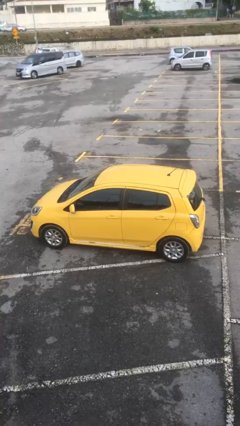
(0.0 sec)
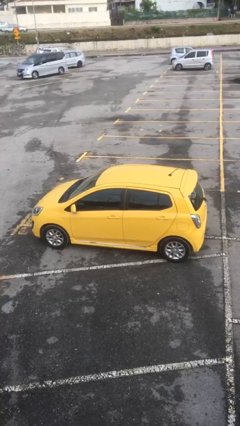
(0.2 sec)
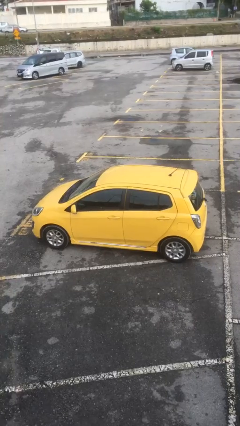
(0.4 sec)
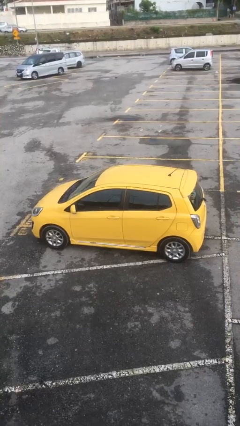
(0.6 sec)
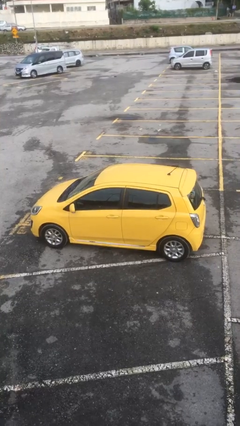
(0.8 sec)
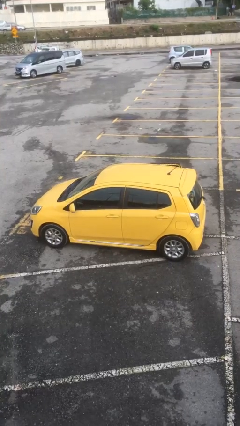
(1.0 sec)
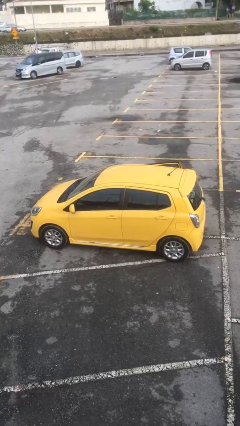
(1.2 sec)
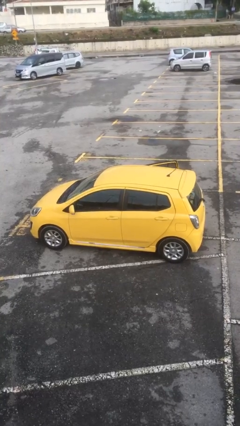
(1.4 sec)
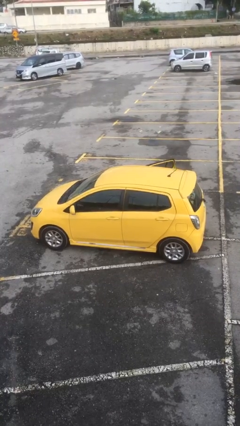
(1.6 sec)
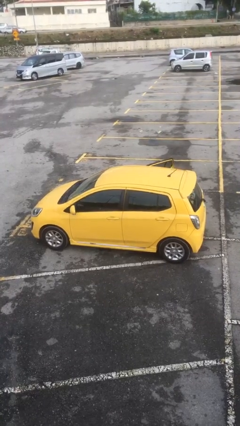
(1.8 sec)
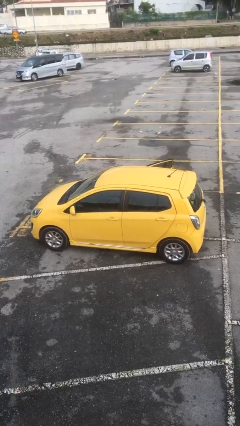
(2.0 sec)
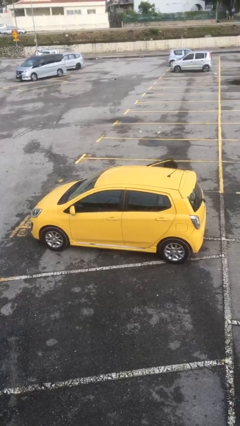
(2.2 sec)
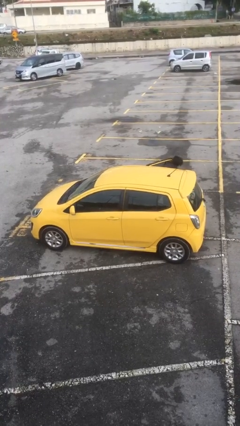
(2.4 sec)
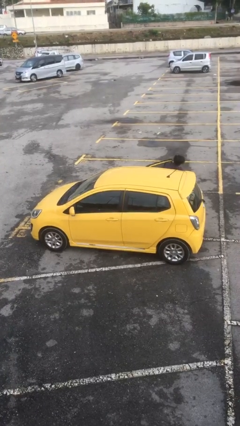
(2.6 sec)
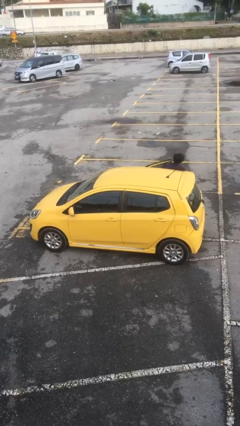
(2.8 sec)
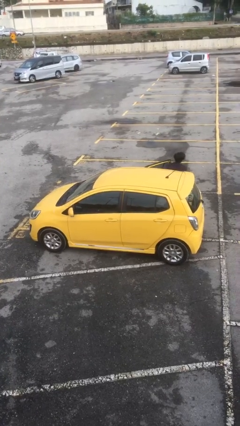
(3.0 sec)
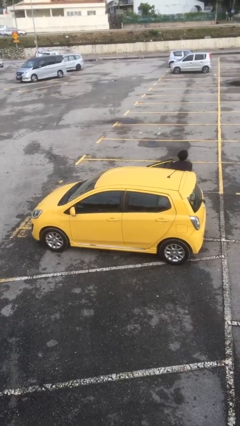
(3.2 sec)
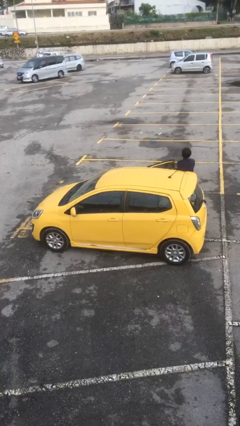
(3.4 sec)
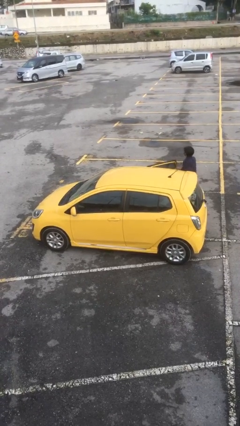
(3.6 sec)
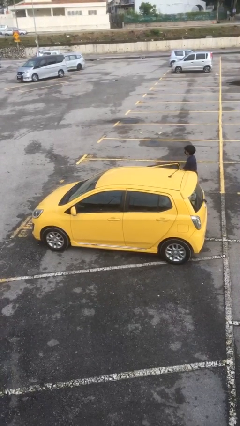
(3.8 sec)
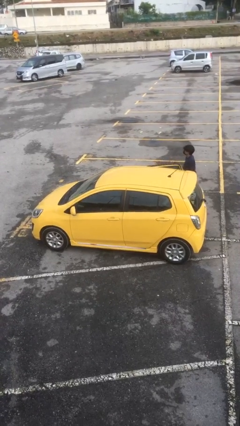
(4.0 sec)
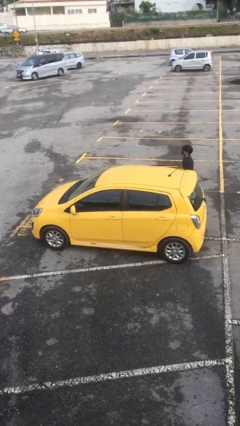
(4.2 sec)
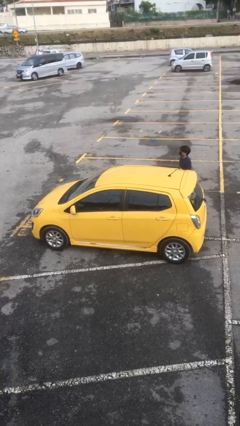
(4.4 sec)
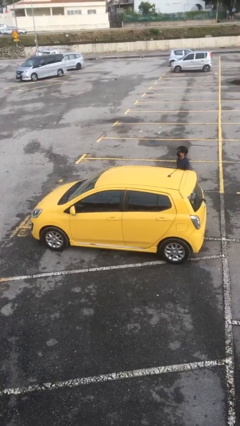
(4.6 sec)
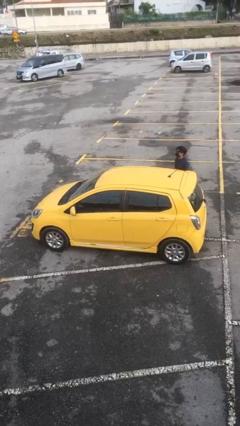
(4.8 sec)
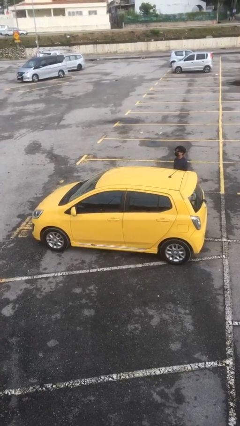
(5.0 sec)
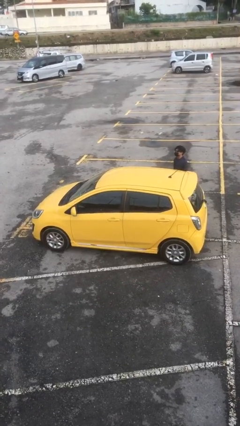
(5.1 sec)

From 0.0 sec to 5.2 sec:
car drops off person

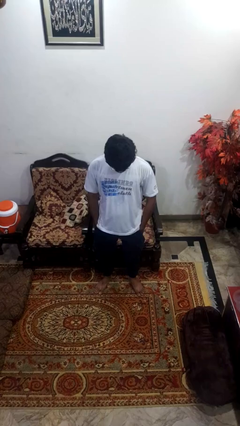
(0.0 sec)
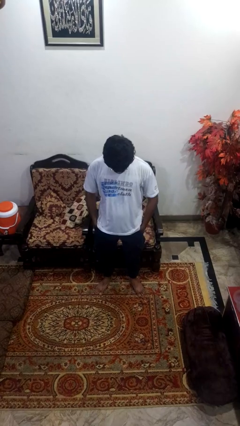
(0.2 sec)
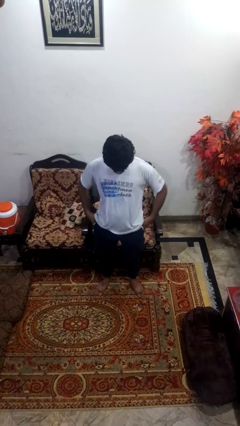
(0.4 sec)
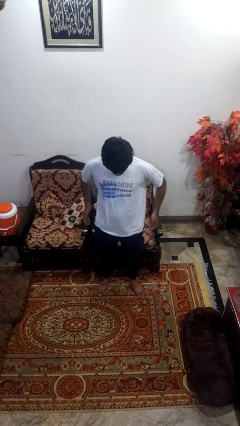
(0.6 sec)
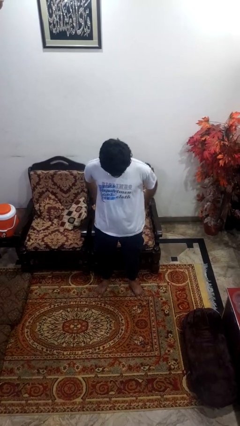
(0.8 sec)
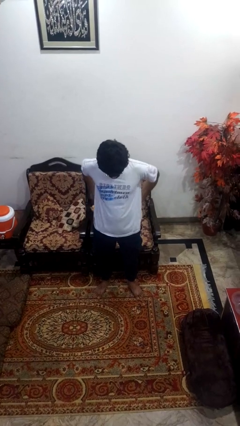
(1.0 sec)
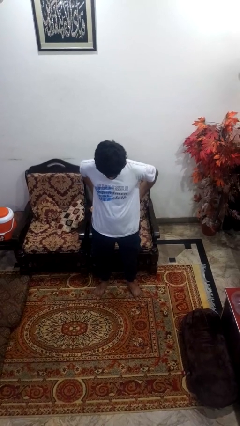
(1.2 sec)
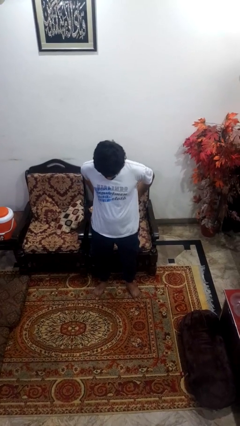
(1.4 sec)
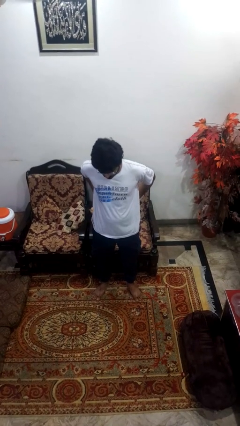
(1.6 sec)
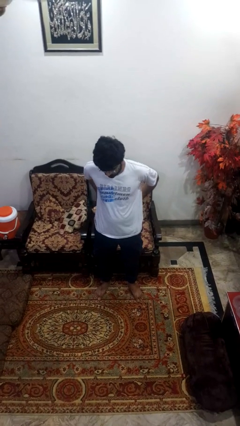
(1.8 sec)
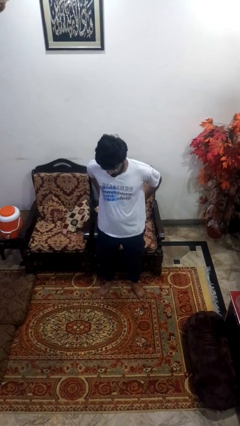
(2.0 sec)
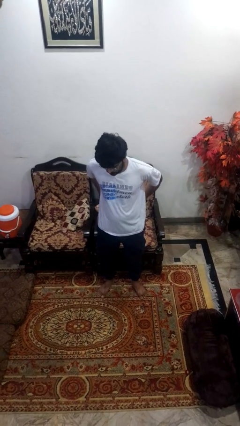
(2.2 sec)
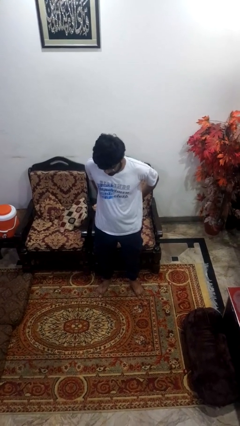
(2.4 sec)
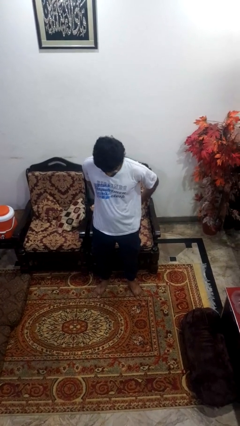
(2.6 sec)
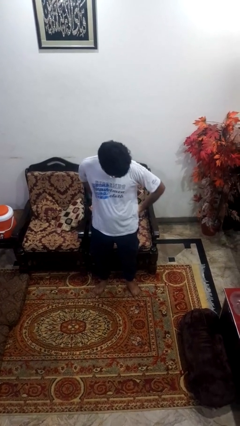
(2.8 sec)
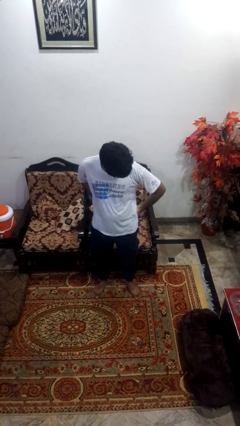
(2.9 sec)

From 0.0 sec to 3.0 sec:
person puts hands in back pockets

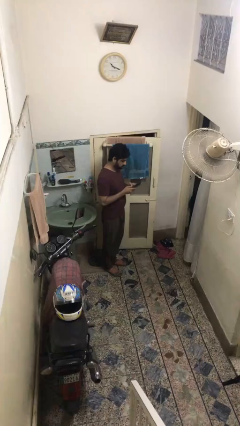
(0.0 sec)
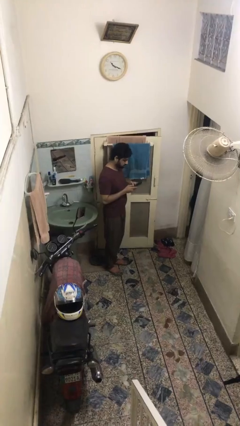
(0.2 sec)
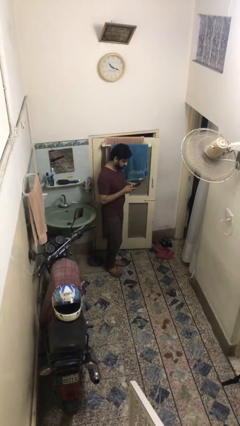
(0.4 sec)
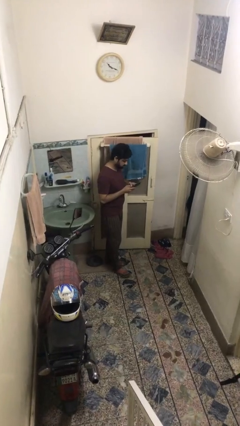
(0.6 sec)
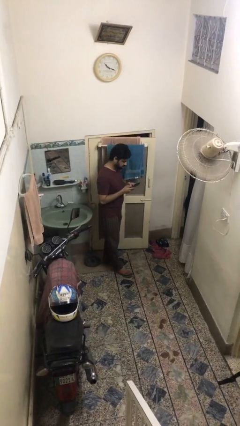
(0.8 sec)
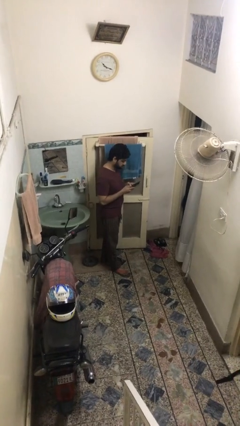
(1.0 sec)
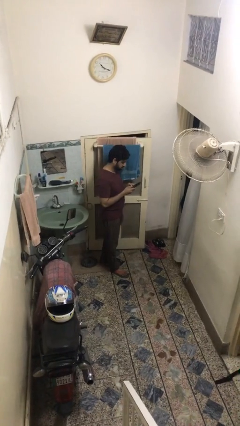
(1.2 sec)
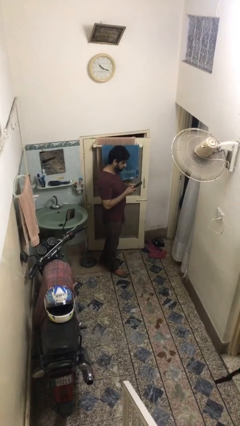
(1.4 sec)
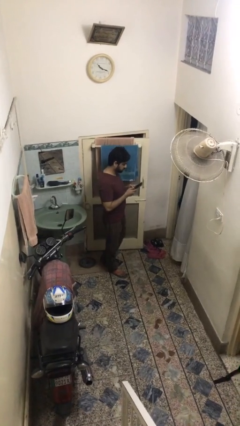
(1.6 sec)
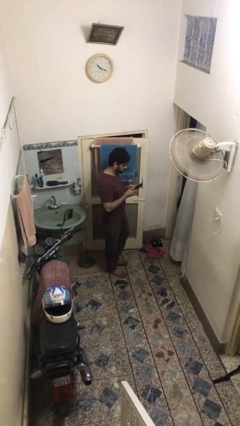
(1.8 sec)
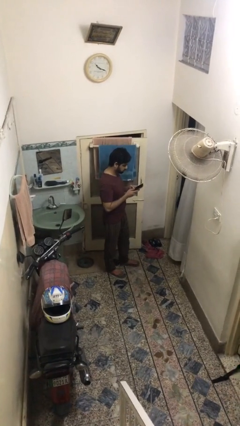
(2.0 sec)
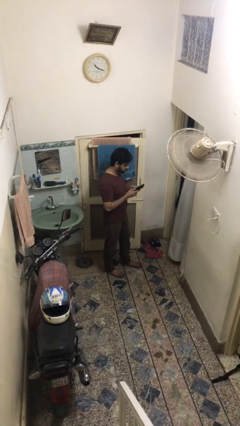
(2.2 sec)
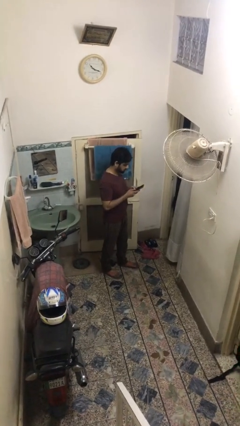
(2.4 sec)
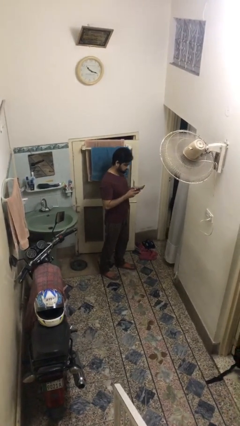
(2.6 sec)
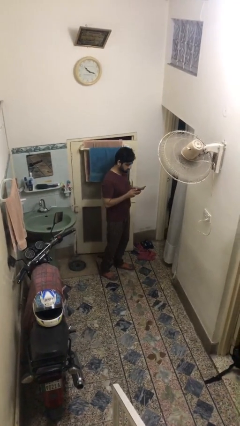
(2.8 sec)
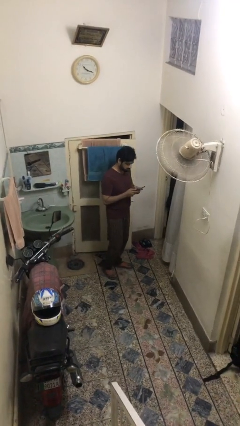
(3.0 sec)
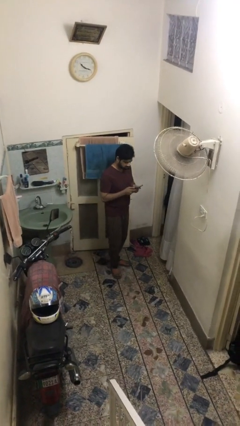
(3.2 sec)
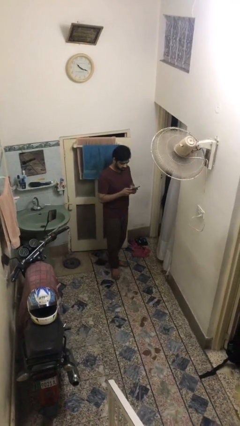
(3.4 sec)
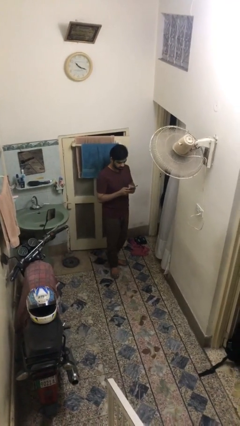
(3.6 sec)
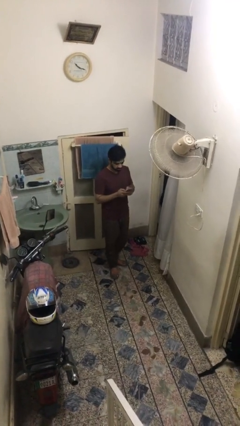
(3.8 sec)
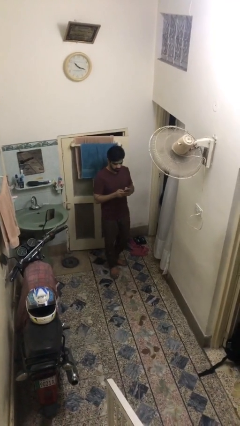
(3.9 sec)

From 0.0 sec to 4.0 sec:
person texts on phone

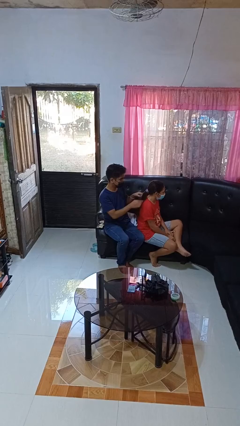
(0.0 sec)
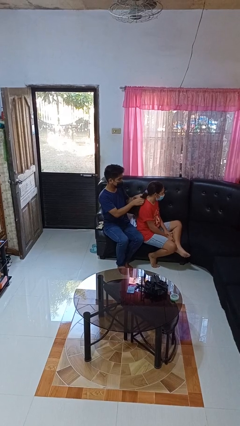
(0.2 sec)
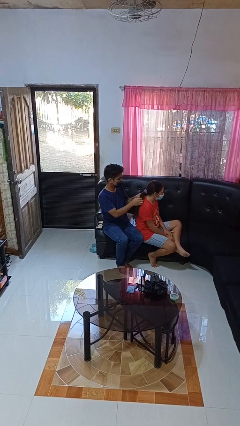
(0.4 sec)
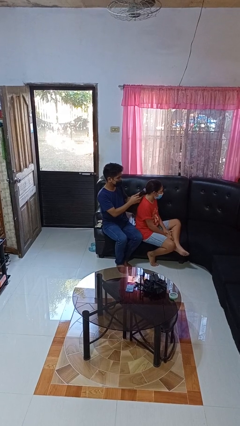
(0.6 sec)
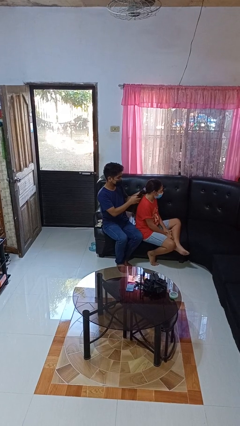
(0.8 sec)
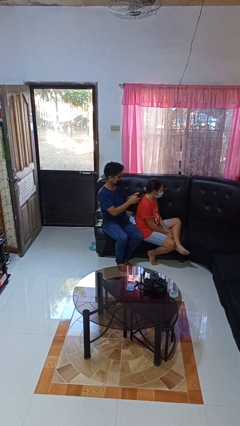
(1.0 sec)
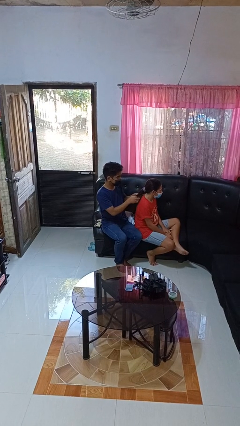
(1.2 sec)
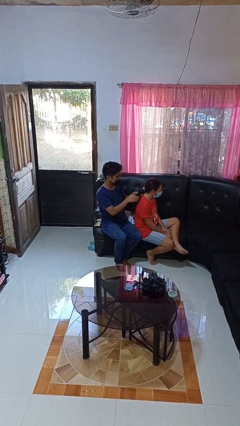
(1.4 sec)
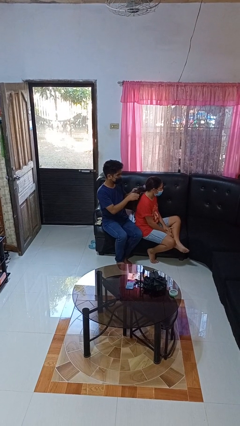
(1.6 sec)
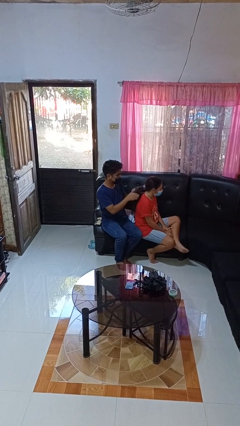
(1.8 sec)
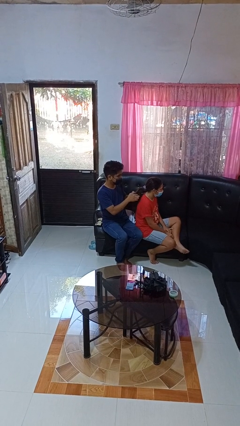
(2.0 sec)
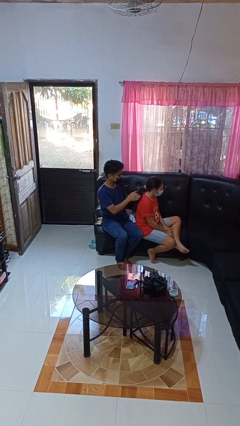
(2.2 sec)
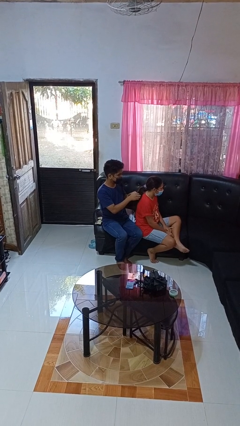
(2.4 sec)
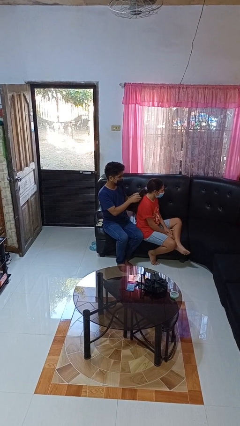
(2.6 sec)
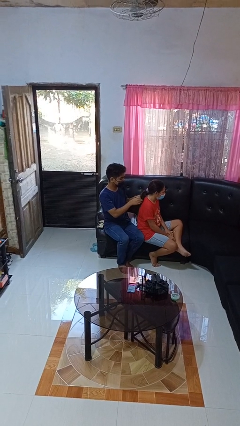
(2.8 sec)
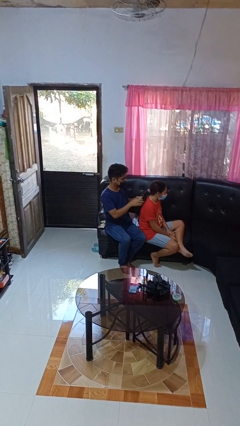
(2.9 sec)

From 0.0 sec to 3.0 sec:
person braids hair of person

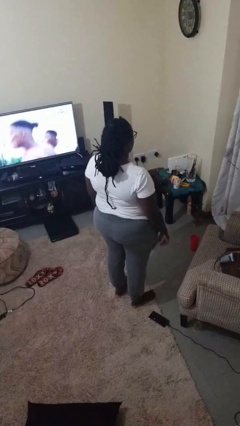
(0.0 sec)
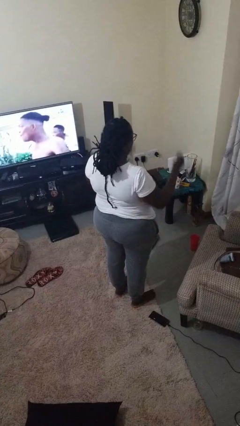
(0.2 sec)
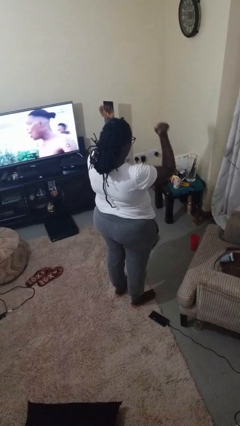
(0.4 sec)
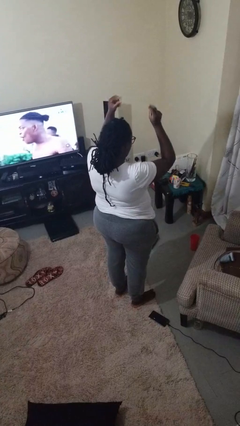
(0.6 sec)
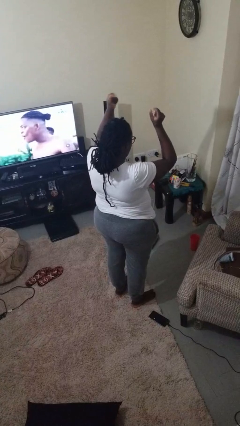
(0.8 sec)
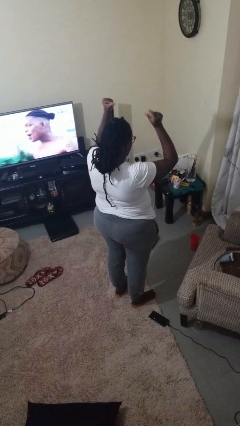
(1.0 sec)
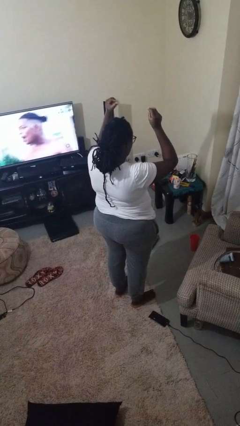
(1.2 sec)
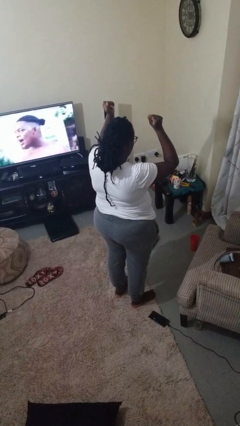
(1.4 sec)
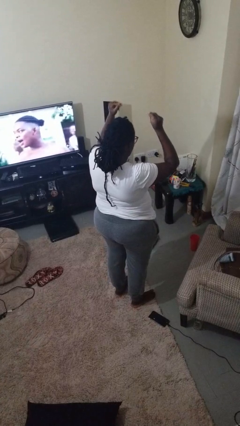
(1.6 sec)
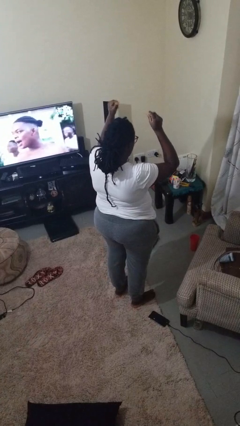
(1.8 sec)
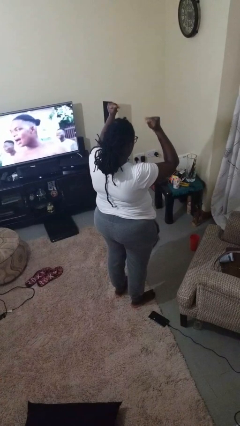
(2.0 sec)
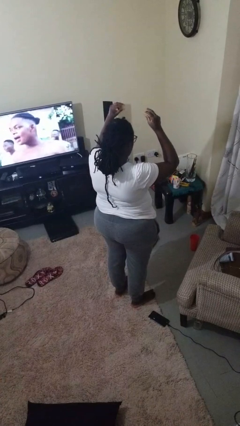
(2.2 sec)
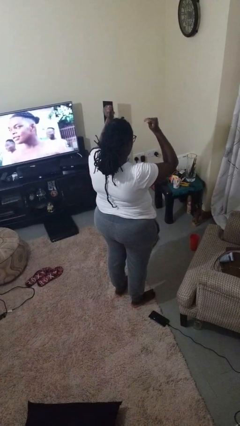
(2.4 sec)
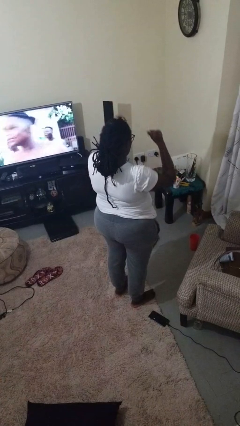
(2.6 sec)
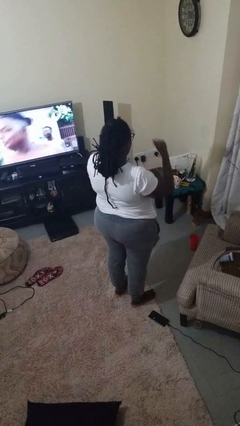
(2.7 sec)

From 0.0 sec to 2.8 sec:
person snaps fingers
